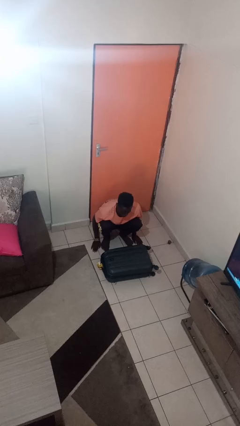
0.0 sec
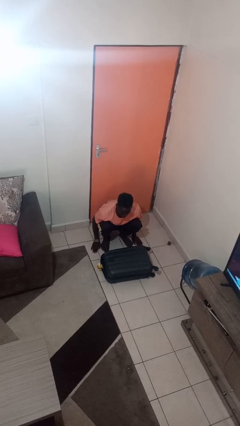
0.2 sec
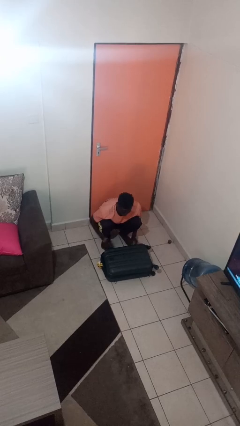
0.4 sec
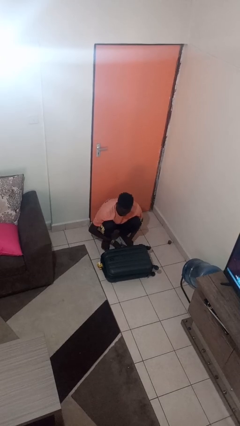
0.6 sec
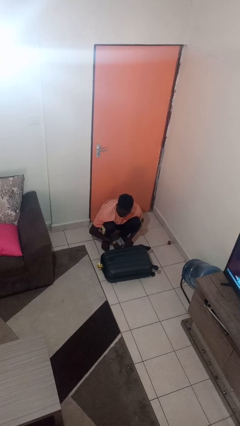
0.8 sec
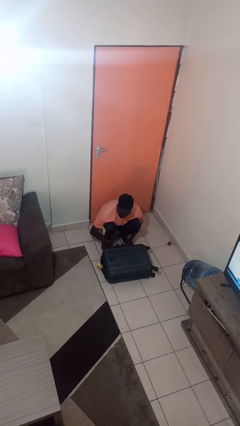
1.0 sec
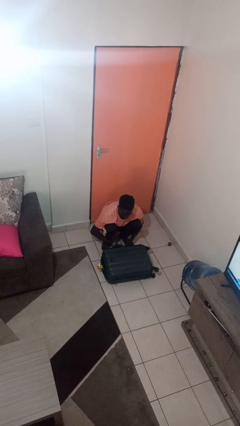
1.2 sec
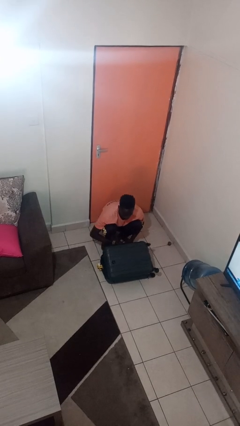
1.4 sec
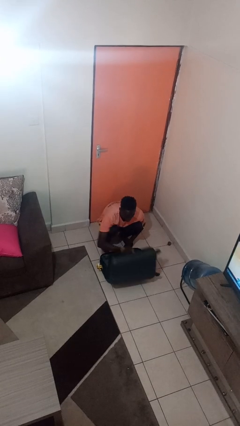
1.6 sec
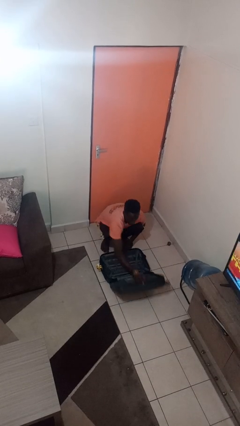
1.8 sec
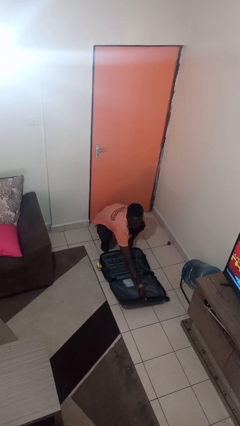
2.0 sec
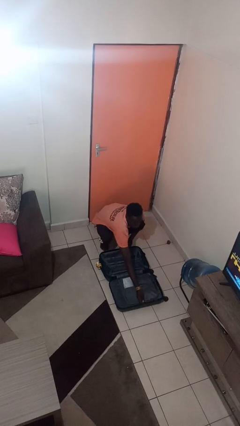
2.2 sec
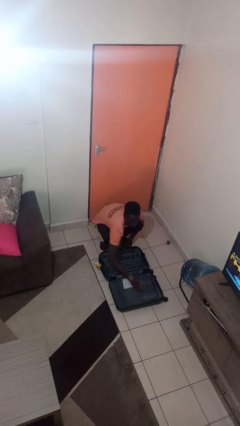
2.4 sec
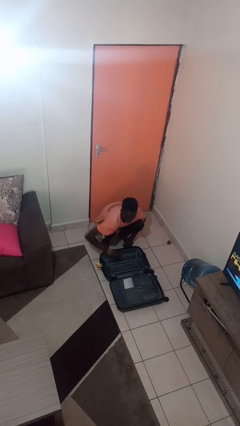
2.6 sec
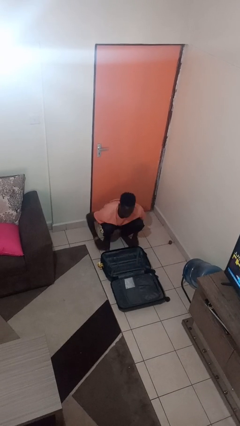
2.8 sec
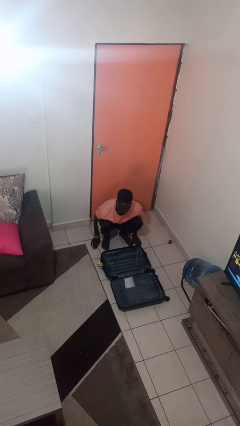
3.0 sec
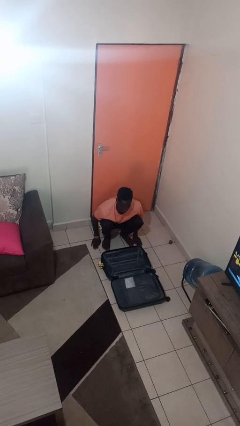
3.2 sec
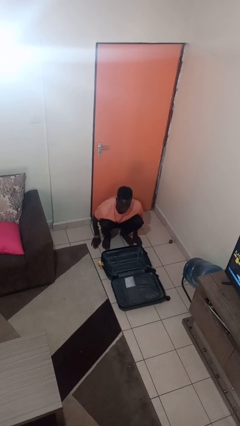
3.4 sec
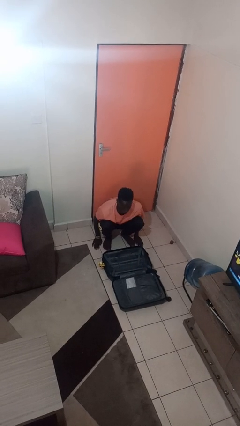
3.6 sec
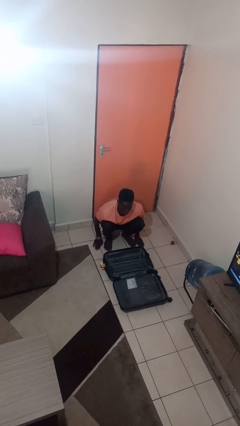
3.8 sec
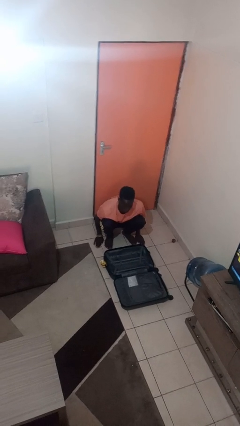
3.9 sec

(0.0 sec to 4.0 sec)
person opens suitcase

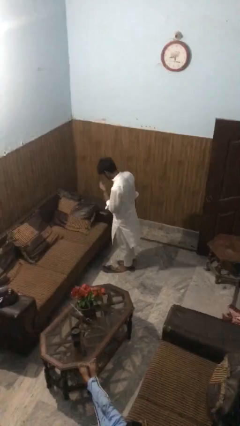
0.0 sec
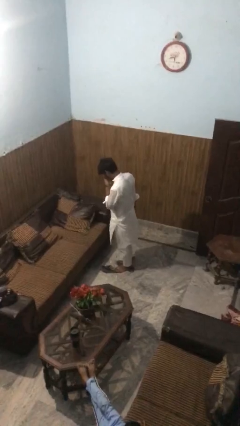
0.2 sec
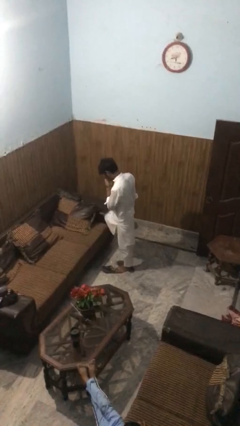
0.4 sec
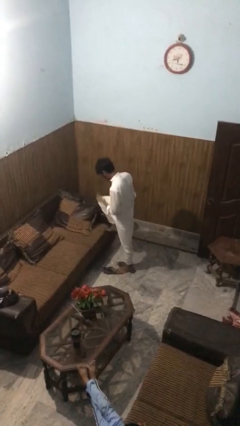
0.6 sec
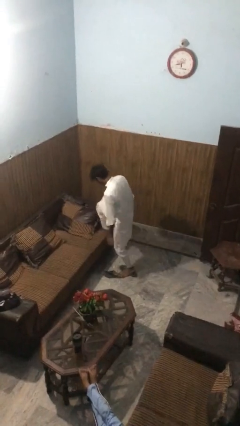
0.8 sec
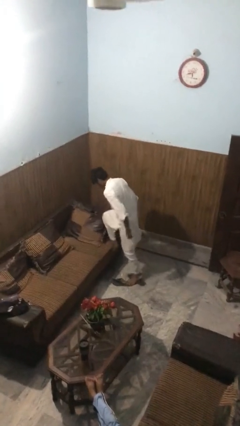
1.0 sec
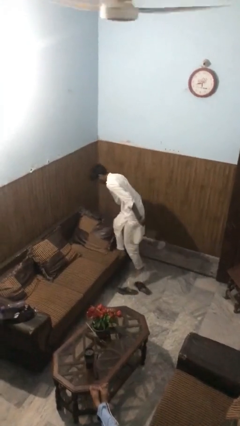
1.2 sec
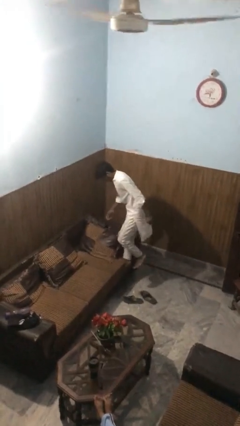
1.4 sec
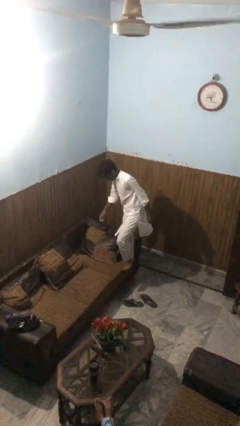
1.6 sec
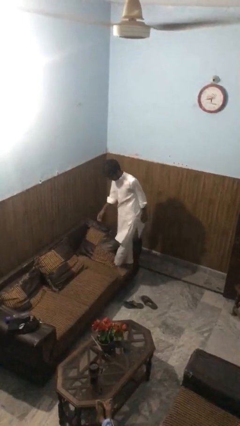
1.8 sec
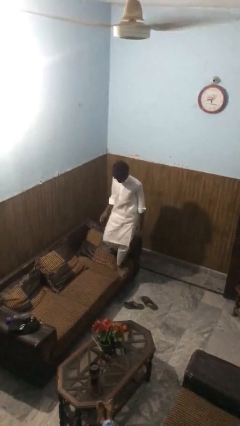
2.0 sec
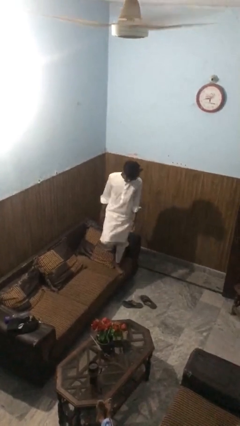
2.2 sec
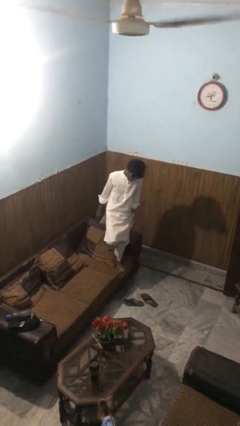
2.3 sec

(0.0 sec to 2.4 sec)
person climbs on couch

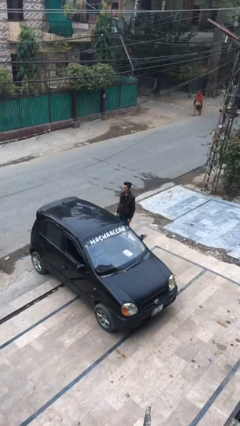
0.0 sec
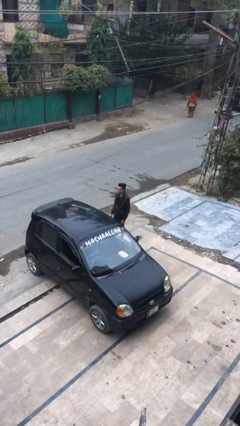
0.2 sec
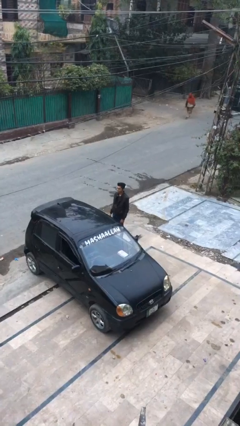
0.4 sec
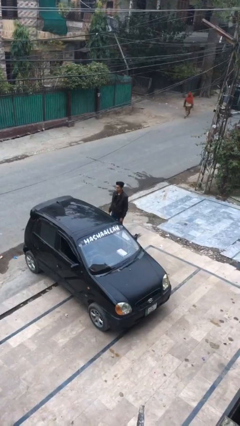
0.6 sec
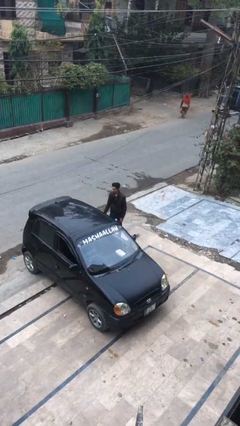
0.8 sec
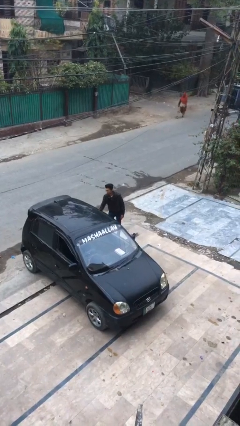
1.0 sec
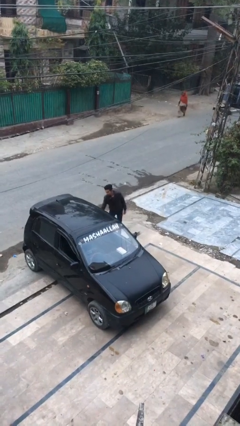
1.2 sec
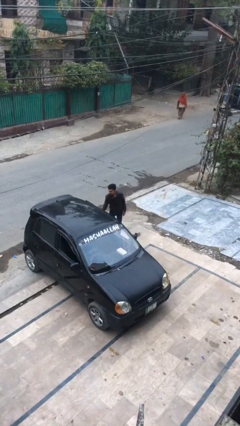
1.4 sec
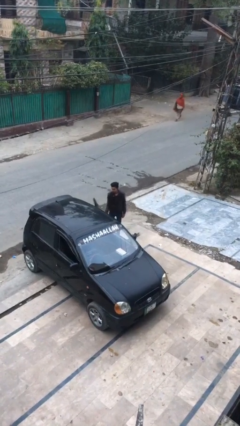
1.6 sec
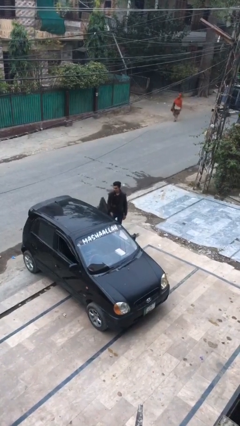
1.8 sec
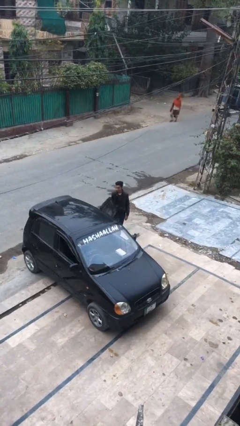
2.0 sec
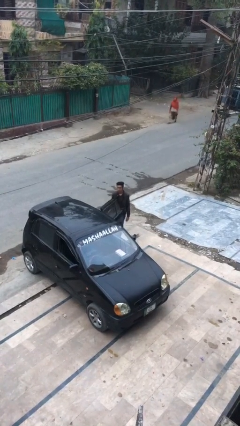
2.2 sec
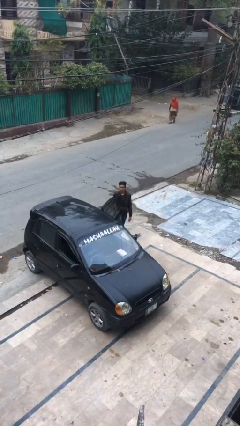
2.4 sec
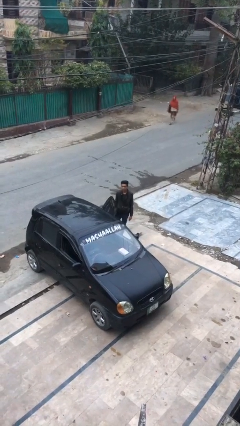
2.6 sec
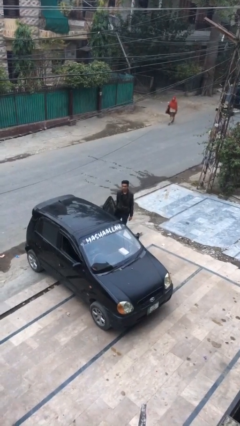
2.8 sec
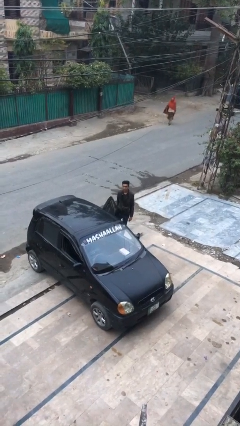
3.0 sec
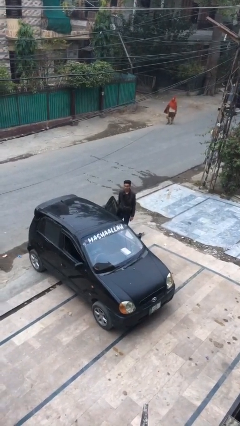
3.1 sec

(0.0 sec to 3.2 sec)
person opens car door

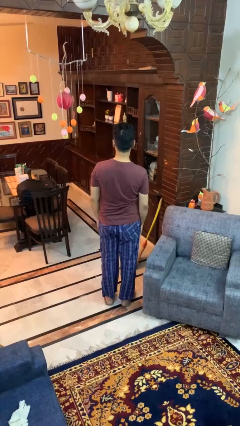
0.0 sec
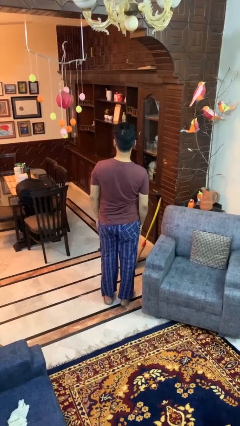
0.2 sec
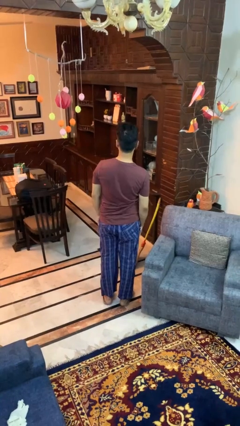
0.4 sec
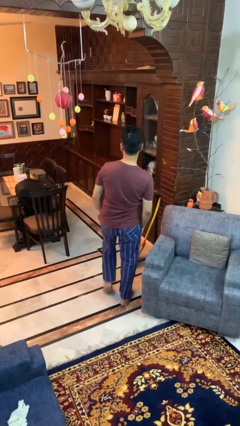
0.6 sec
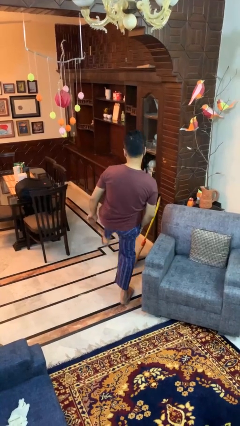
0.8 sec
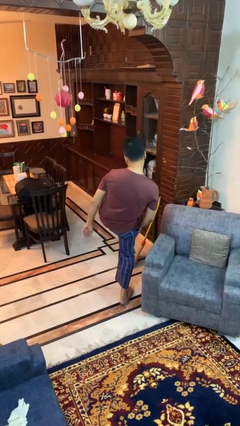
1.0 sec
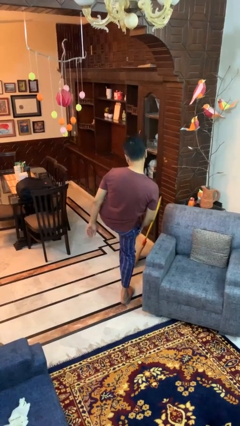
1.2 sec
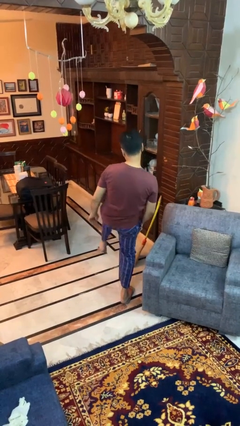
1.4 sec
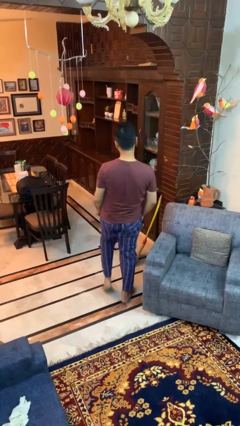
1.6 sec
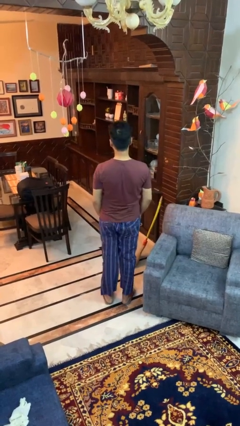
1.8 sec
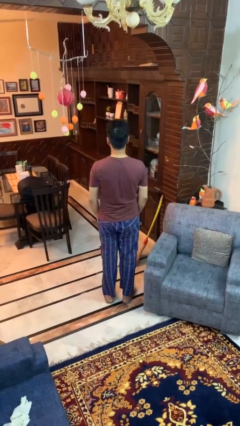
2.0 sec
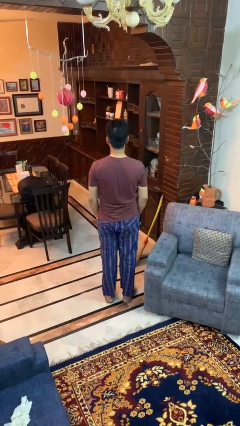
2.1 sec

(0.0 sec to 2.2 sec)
person karate kicks

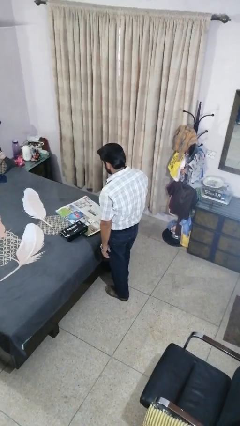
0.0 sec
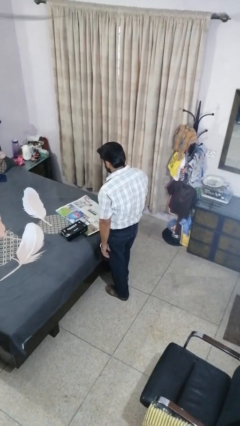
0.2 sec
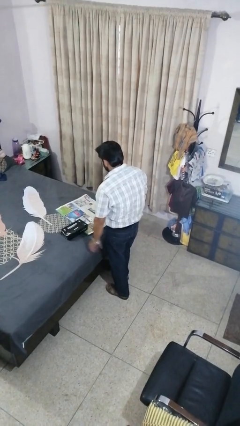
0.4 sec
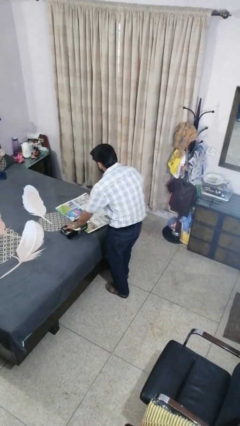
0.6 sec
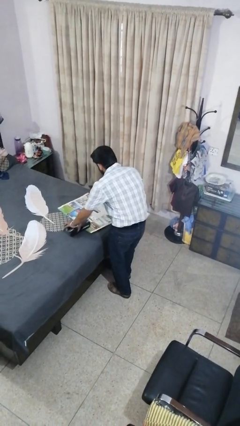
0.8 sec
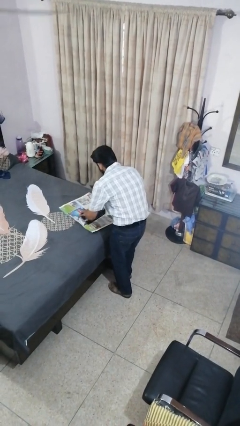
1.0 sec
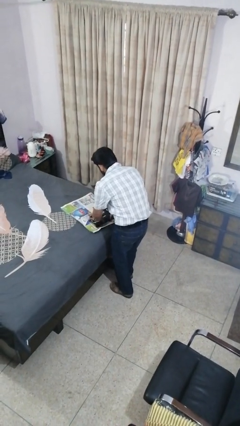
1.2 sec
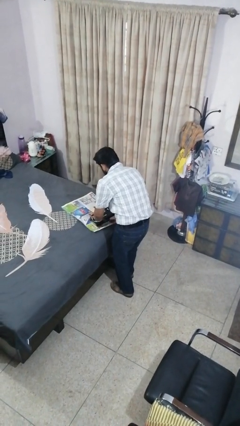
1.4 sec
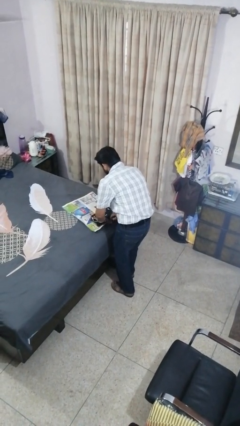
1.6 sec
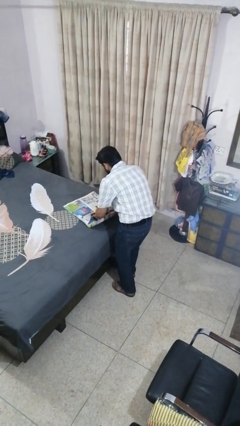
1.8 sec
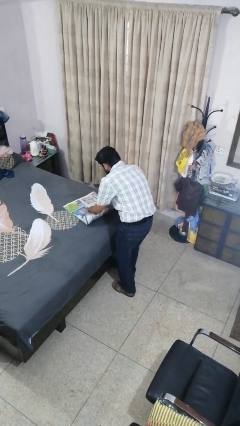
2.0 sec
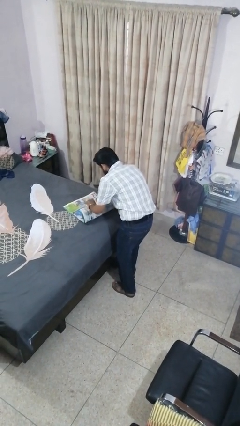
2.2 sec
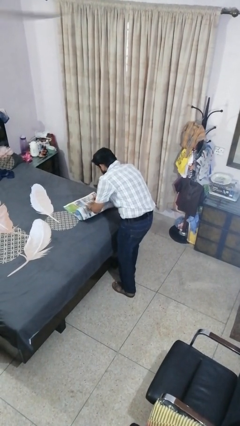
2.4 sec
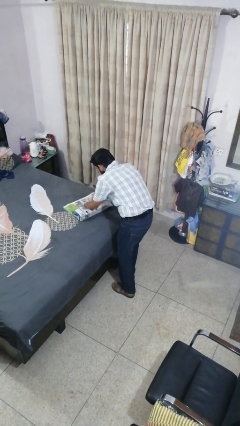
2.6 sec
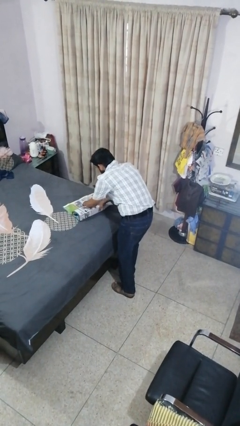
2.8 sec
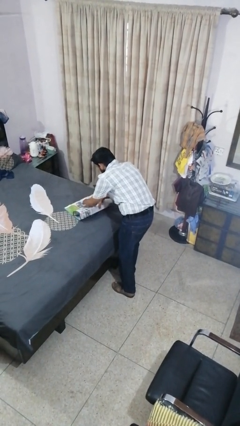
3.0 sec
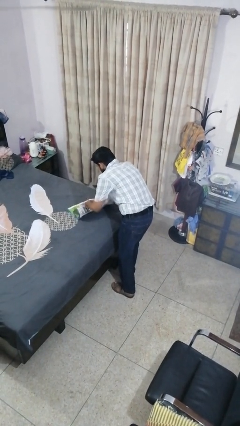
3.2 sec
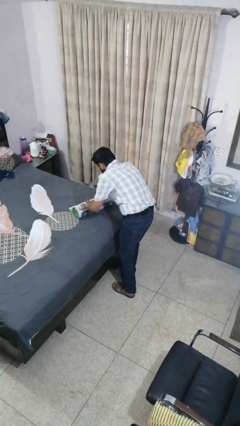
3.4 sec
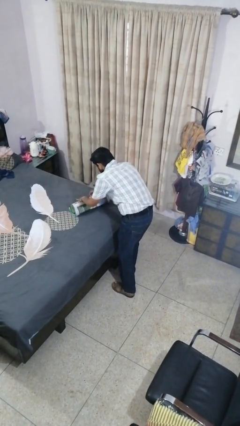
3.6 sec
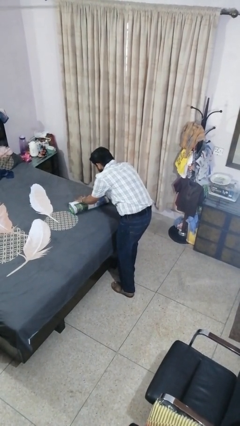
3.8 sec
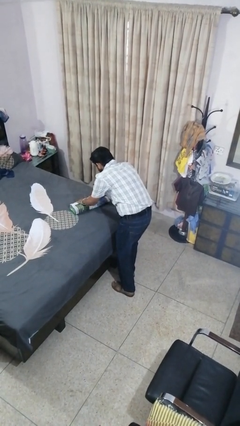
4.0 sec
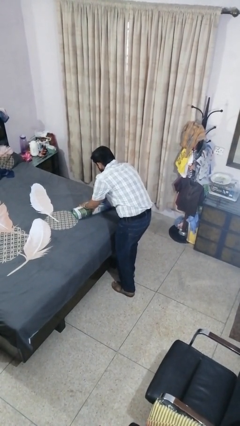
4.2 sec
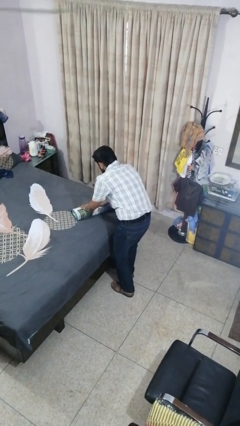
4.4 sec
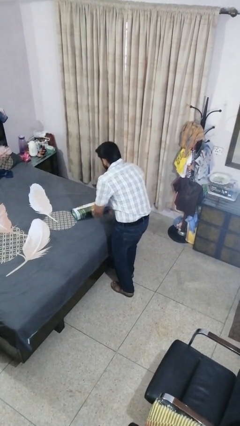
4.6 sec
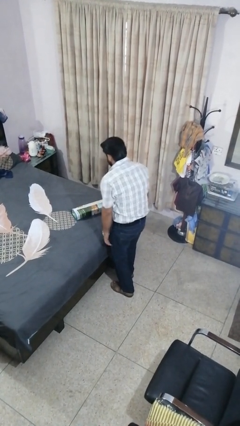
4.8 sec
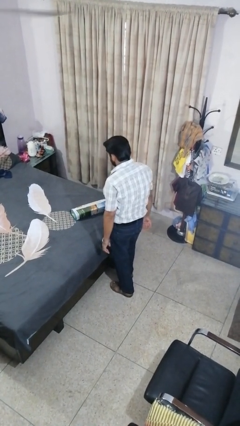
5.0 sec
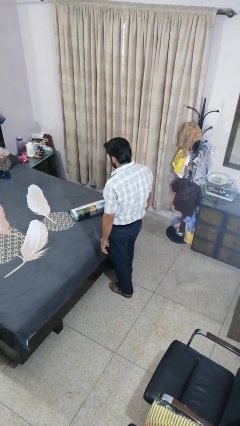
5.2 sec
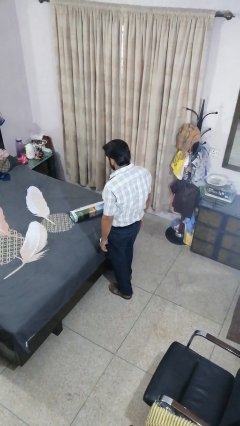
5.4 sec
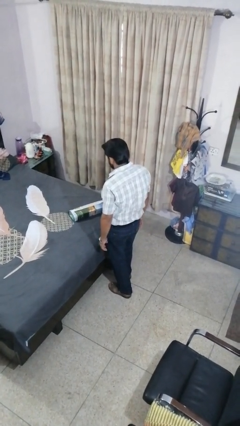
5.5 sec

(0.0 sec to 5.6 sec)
person wraps box

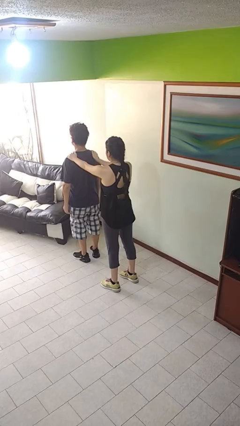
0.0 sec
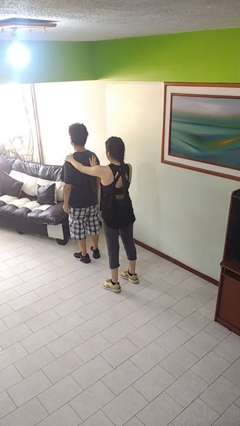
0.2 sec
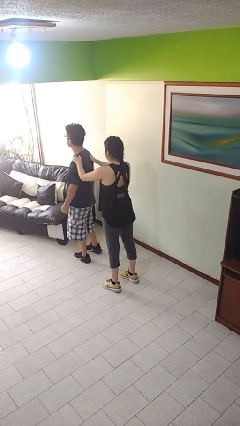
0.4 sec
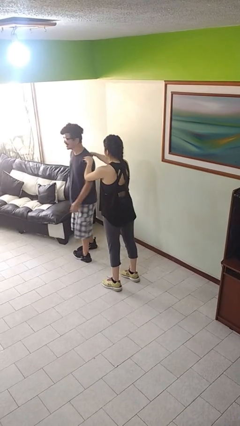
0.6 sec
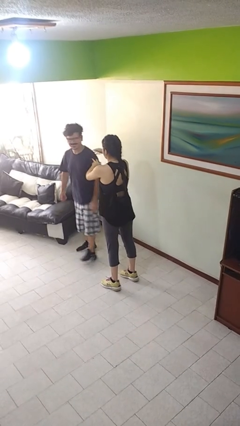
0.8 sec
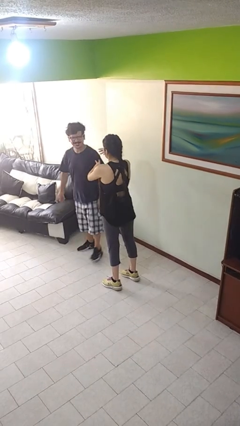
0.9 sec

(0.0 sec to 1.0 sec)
person spins person around
